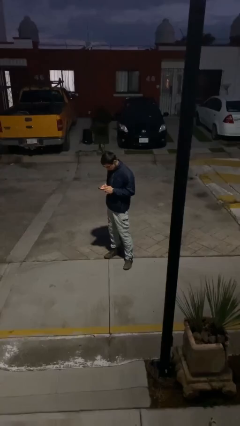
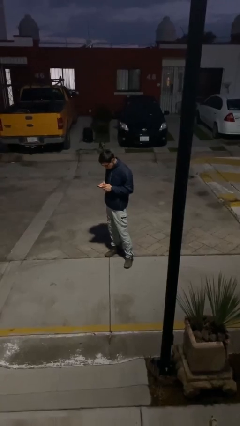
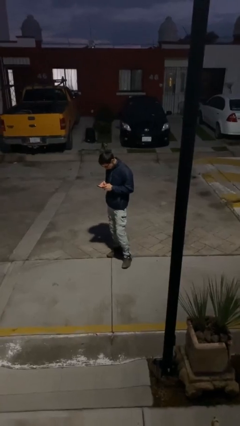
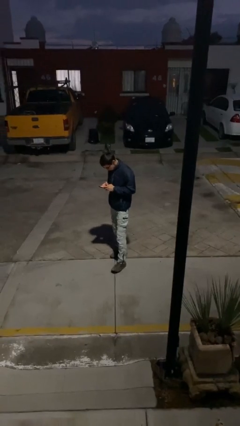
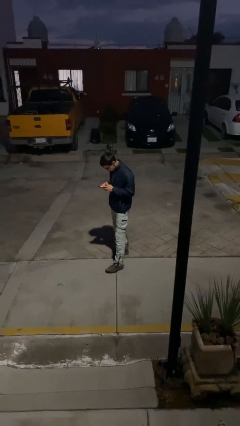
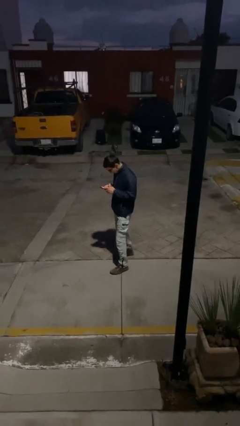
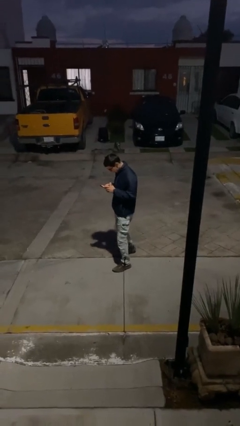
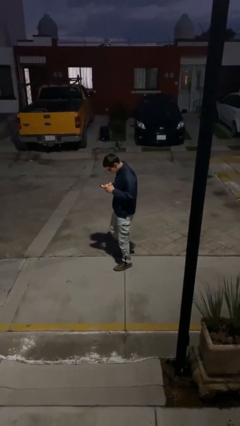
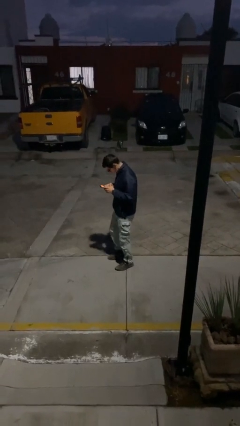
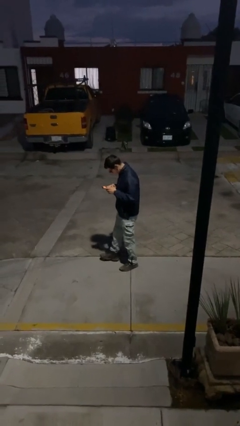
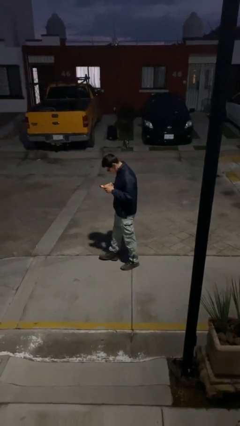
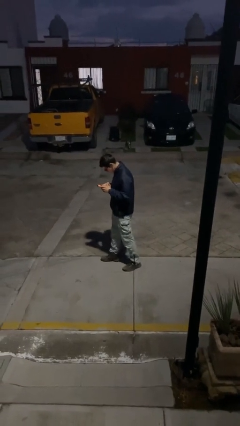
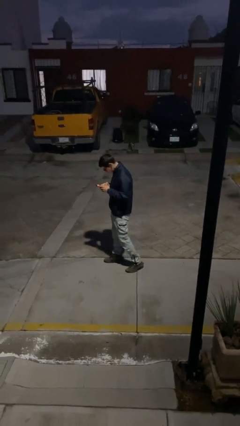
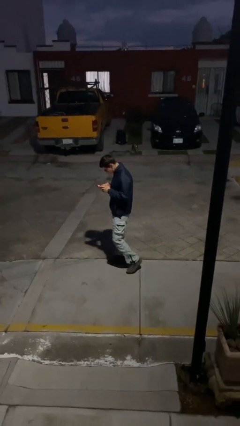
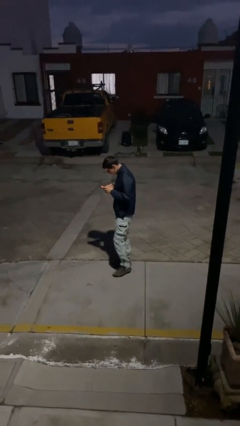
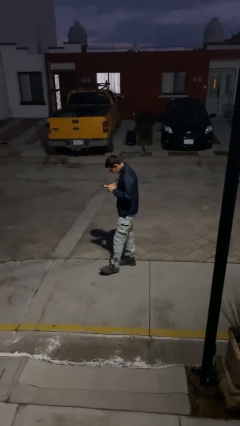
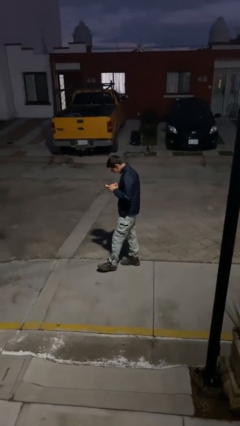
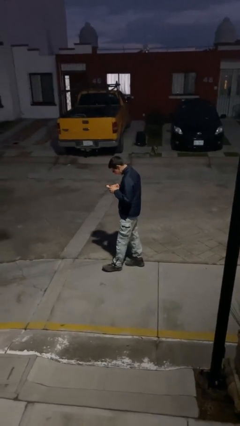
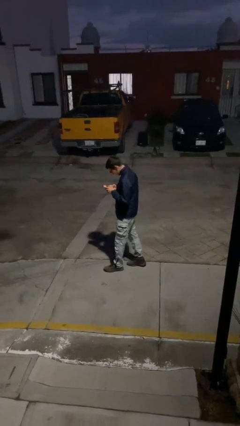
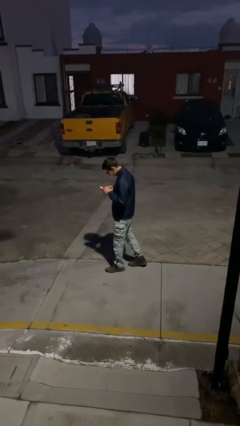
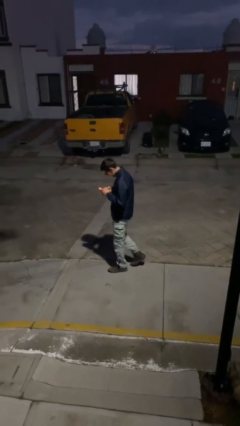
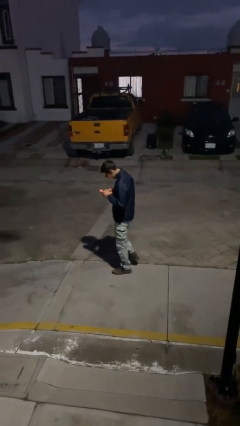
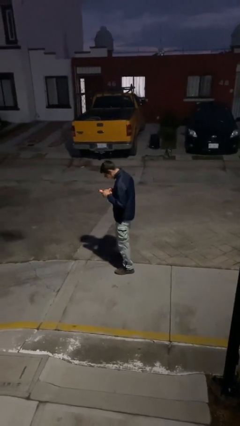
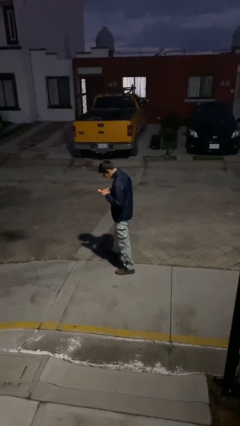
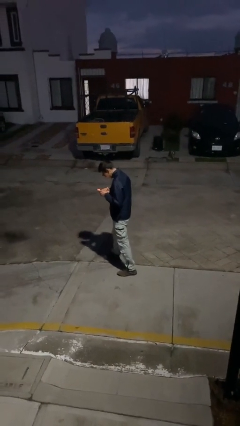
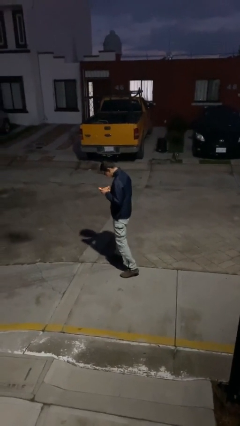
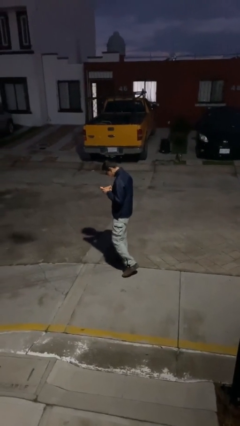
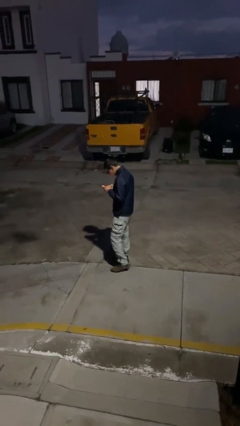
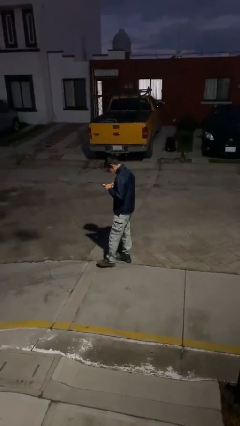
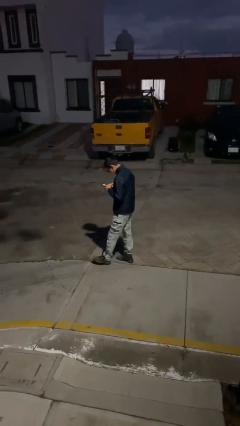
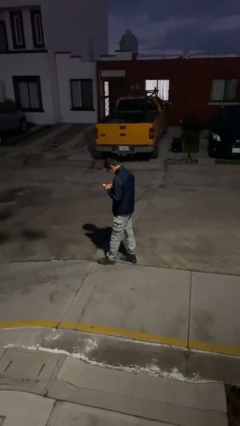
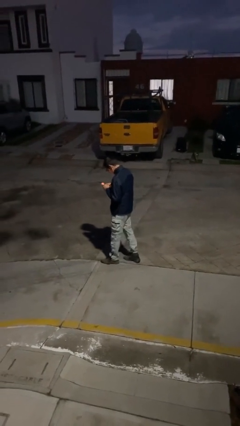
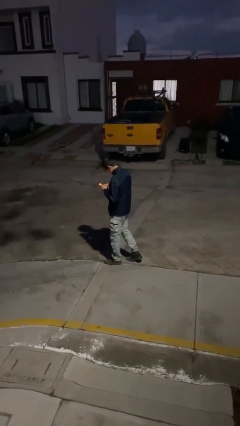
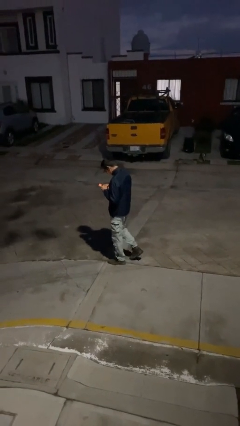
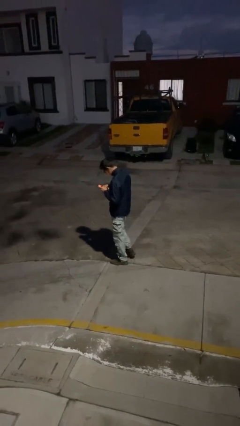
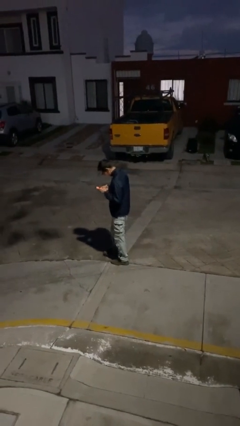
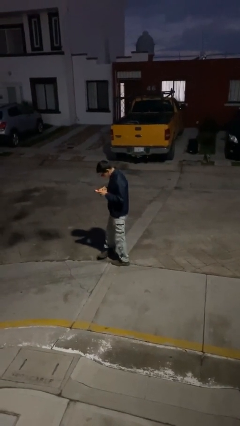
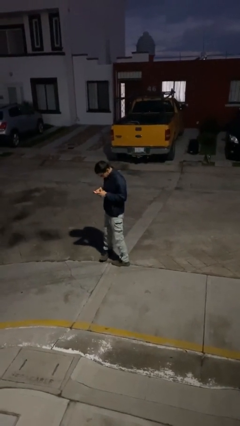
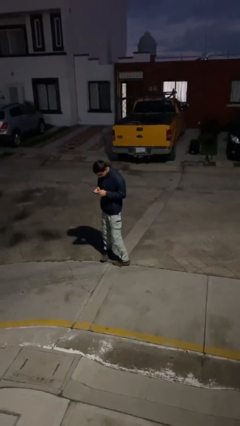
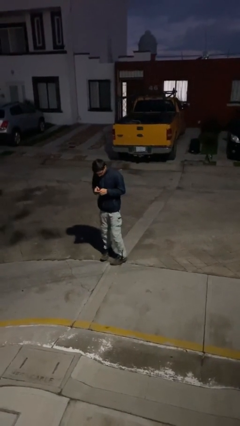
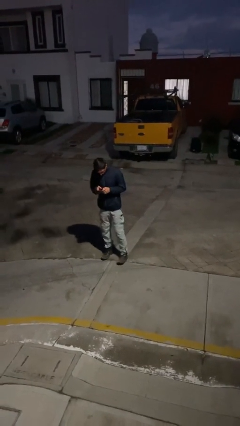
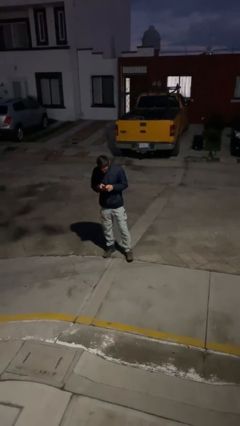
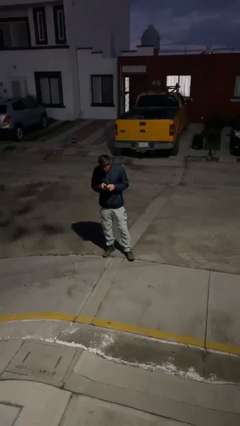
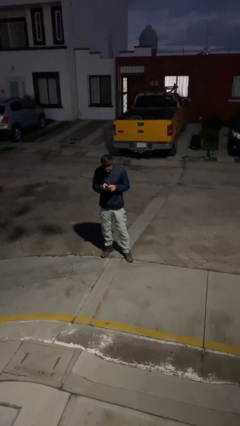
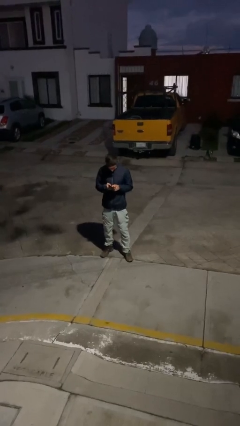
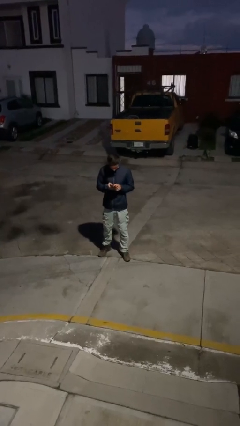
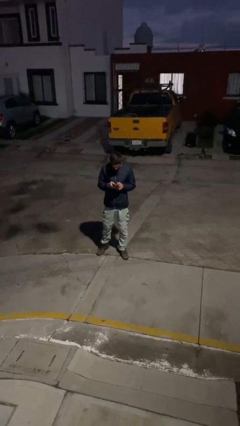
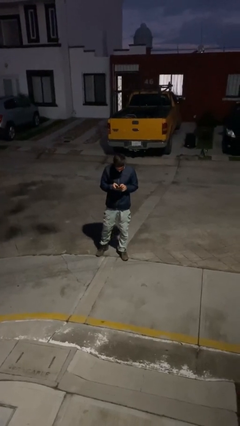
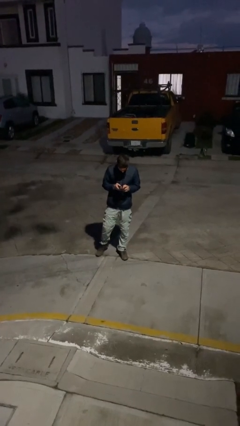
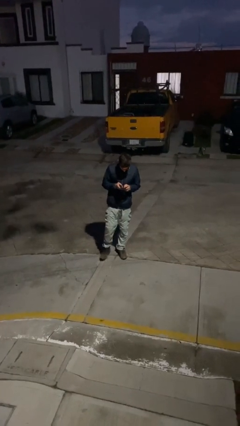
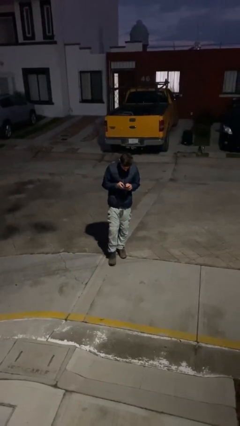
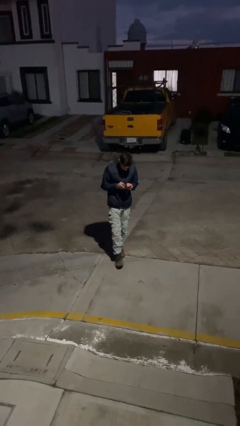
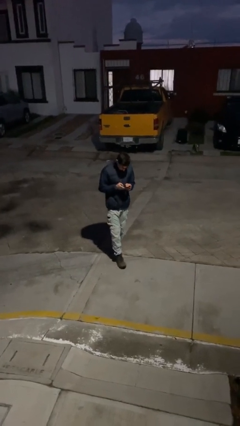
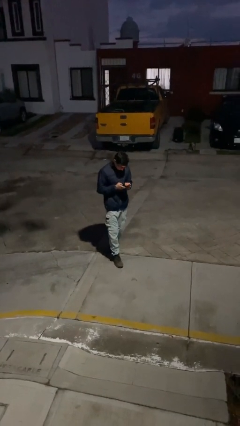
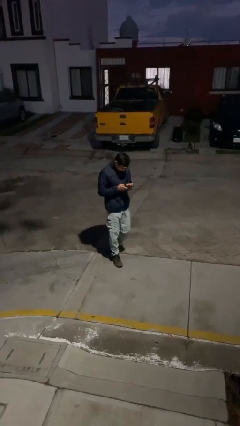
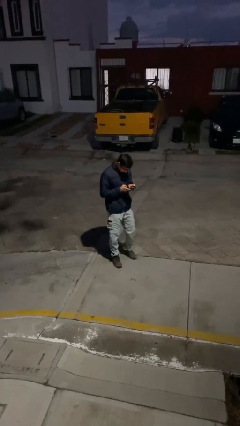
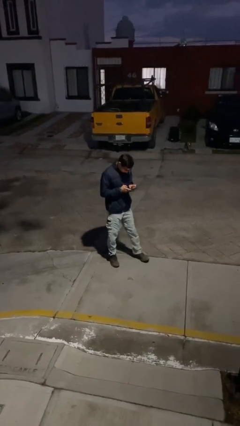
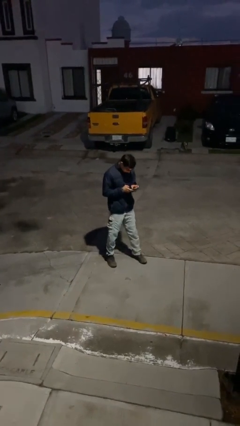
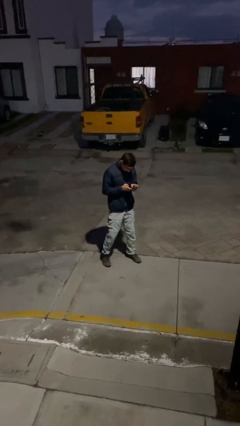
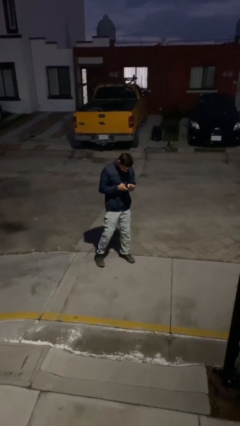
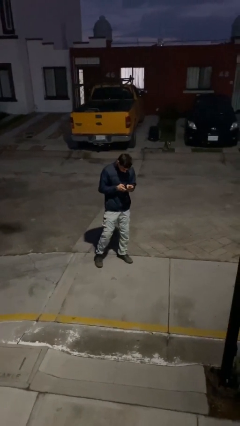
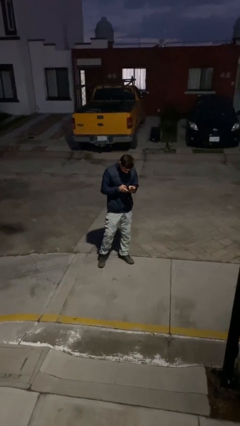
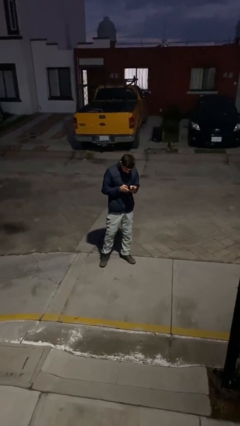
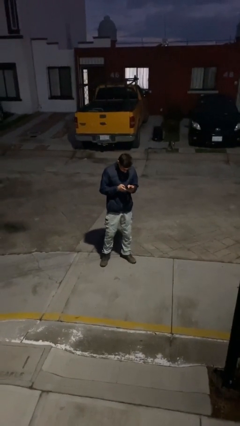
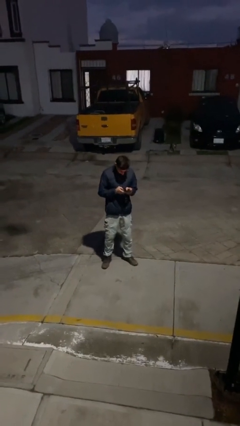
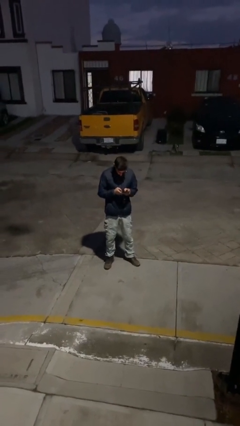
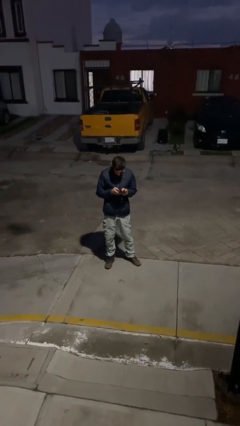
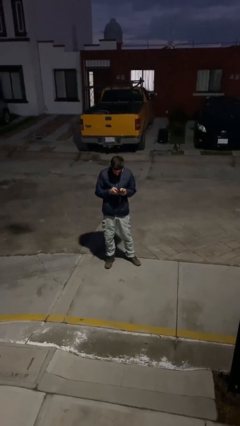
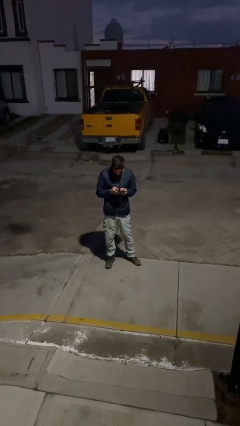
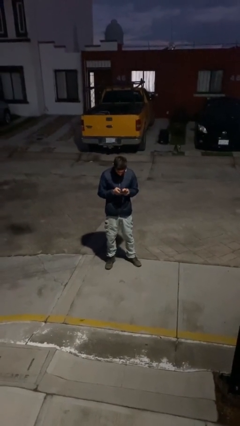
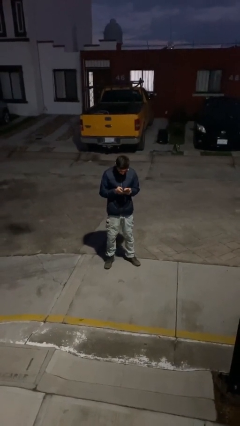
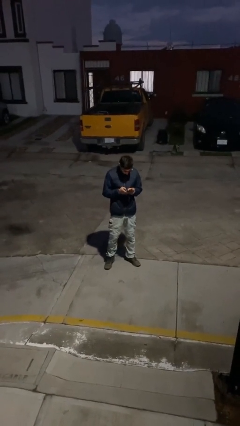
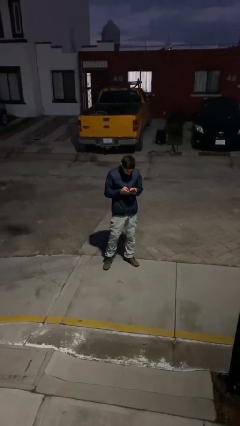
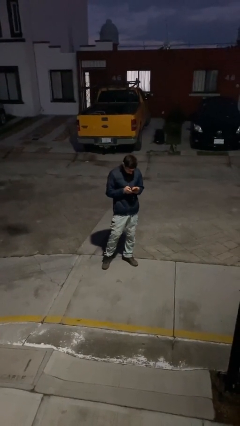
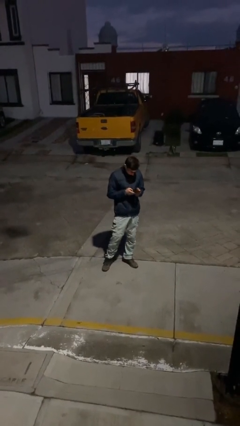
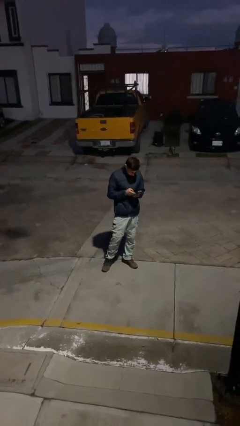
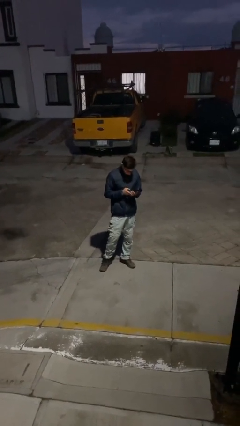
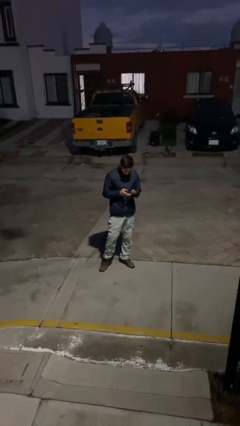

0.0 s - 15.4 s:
person texts on phone

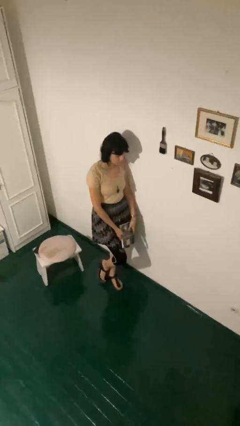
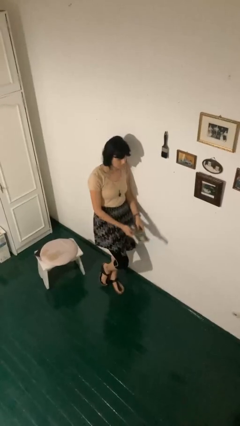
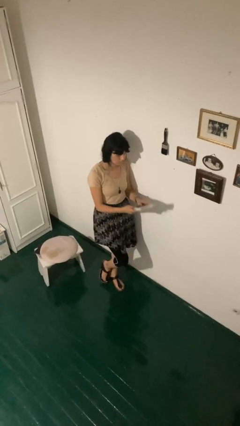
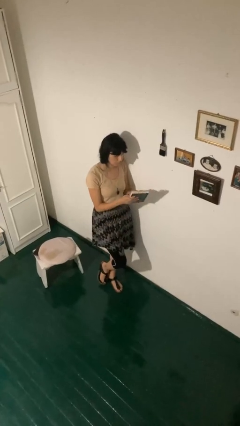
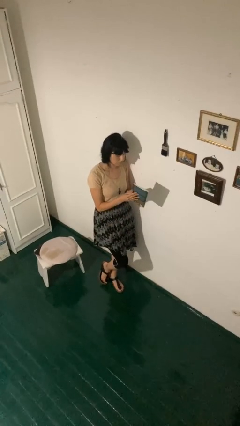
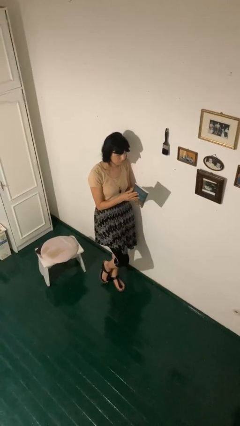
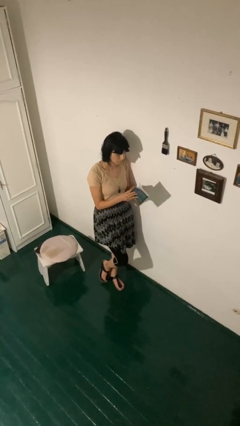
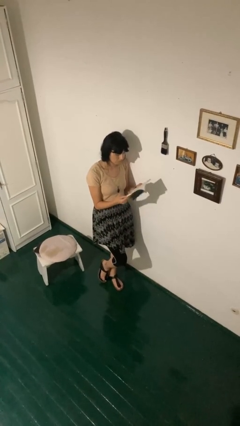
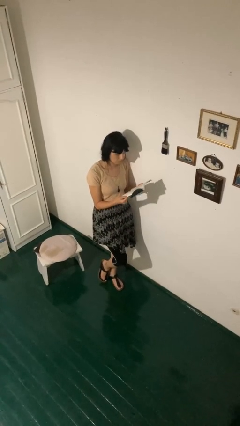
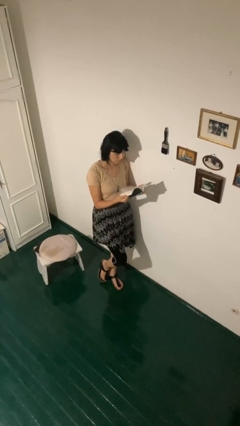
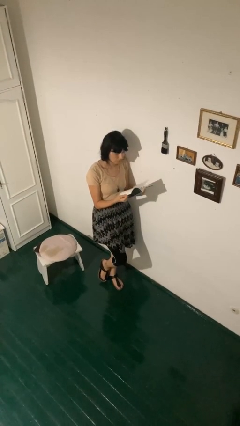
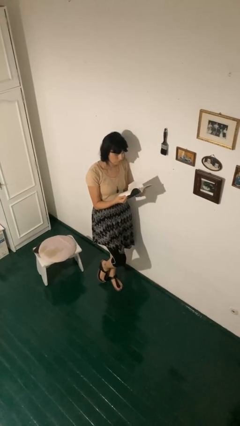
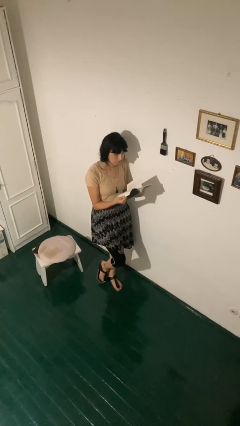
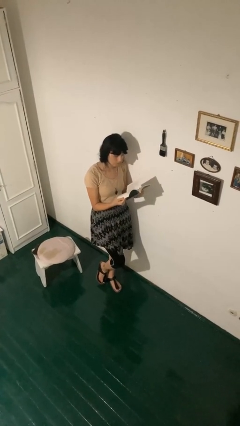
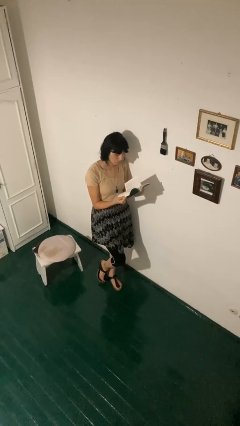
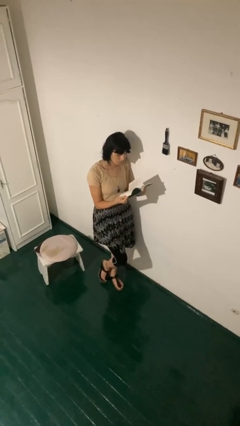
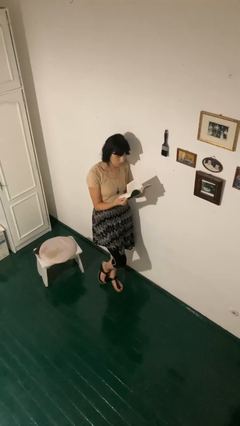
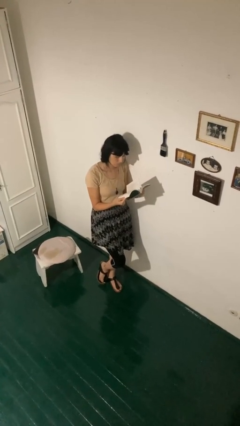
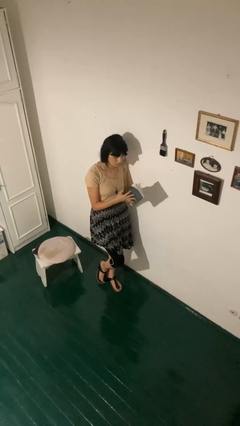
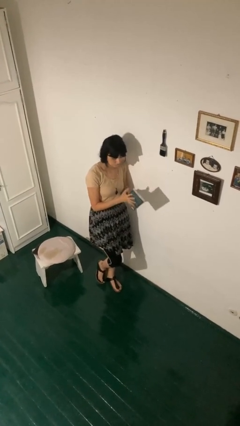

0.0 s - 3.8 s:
person reads book
